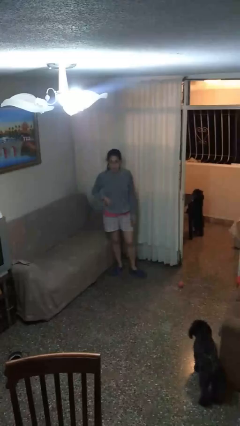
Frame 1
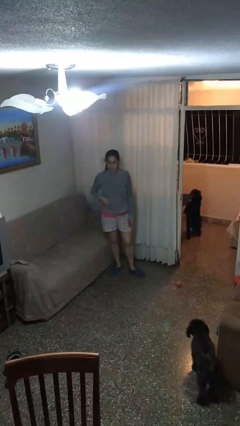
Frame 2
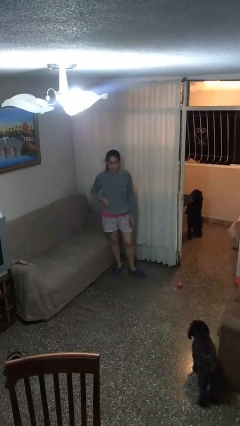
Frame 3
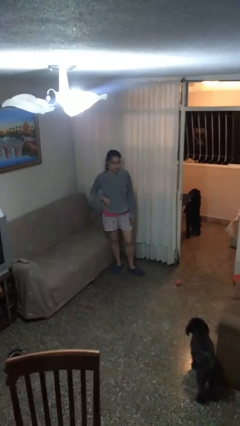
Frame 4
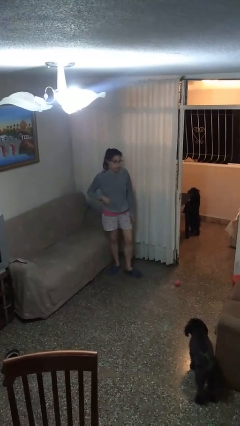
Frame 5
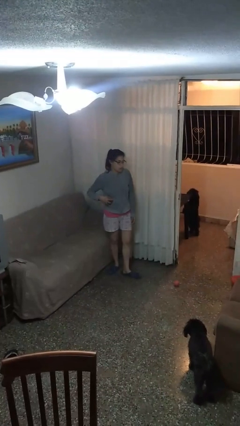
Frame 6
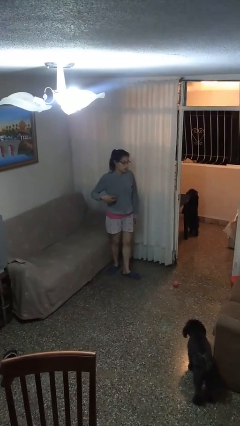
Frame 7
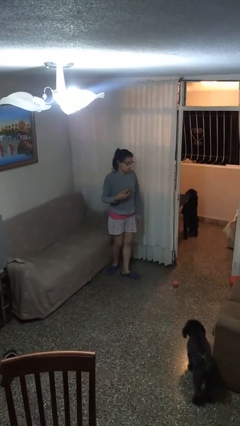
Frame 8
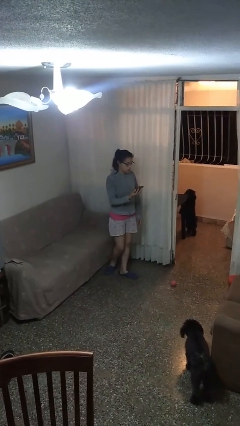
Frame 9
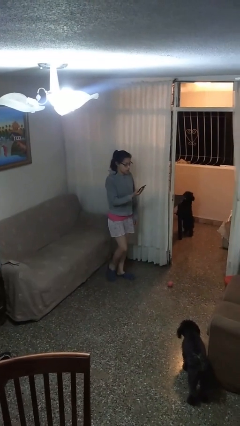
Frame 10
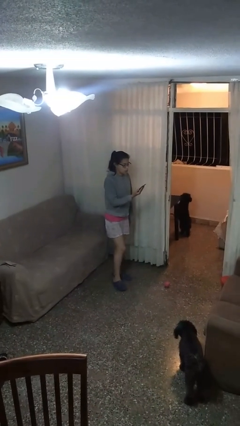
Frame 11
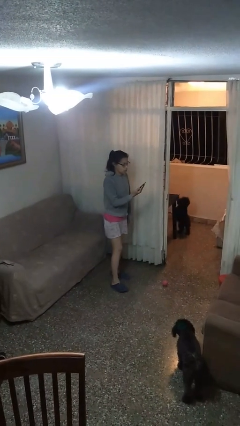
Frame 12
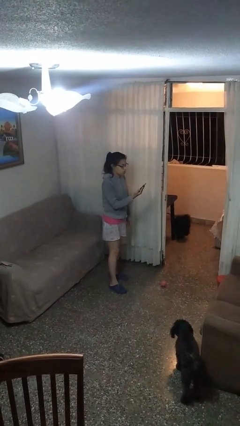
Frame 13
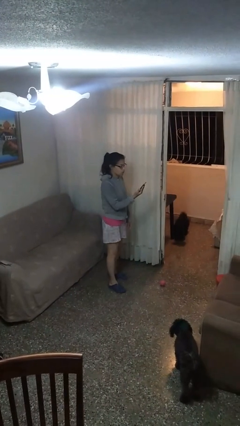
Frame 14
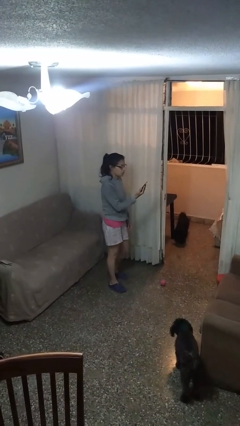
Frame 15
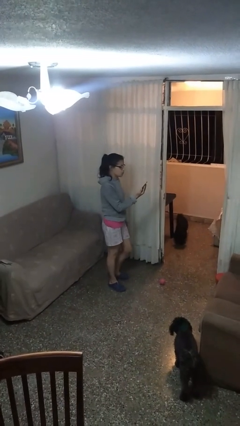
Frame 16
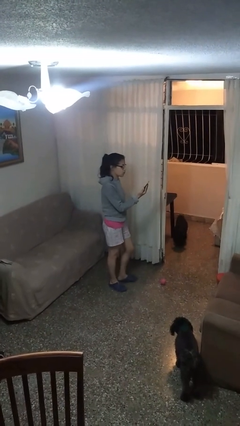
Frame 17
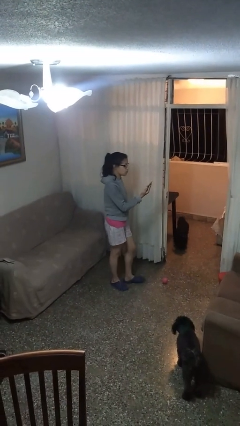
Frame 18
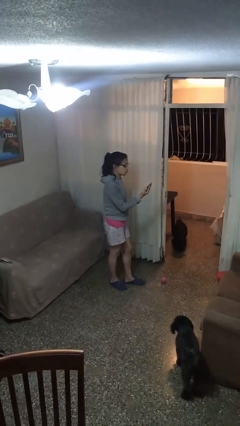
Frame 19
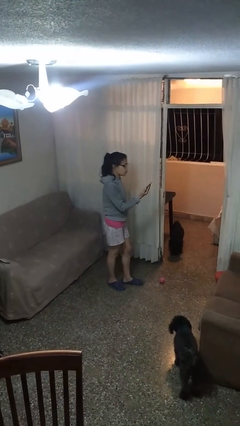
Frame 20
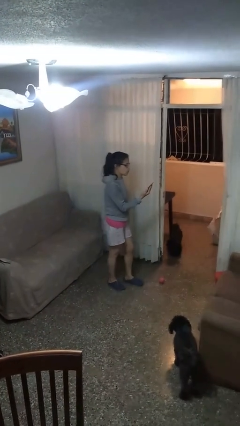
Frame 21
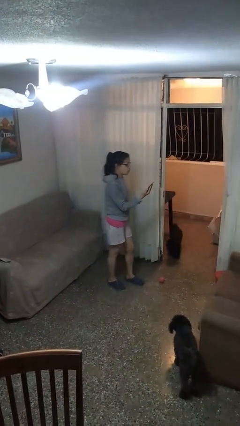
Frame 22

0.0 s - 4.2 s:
person takes phone from pocket

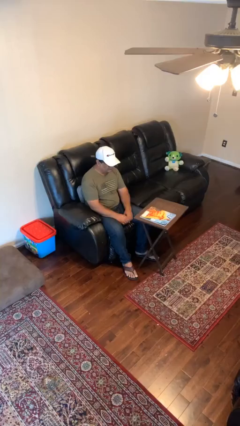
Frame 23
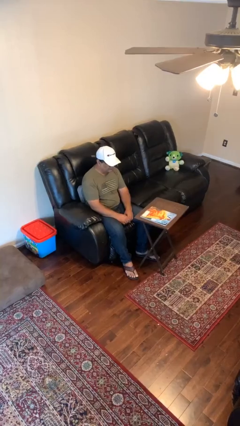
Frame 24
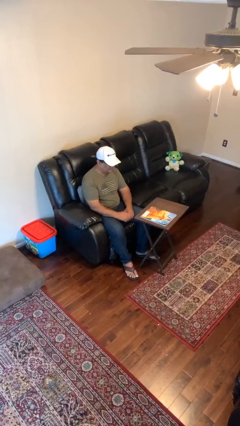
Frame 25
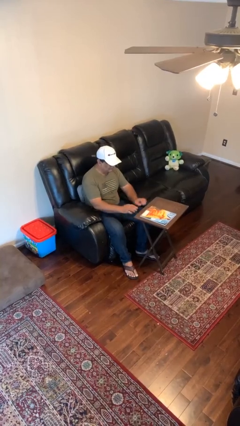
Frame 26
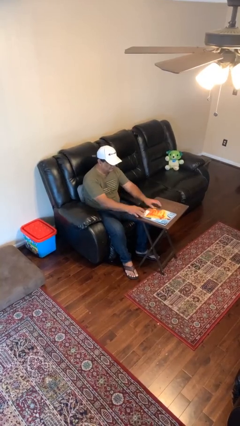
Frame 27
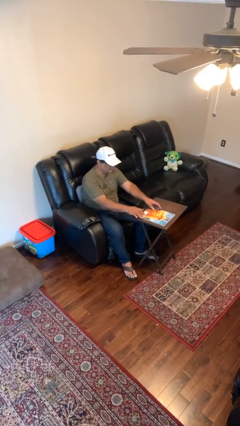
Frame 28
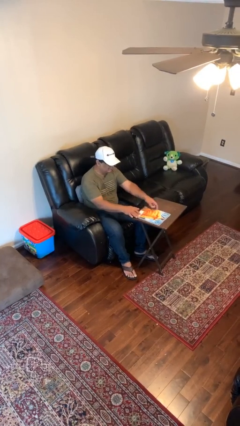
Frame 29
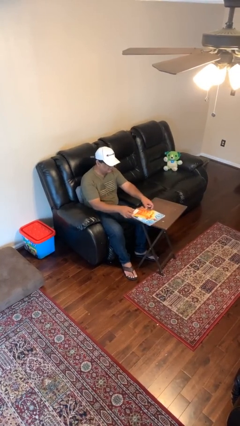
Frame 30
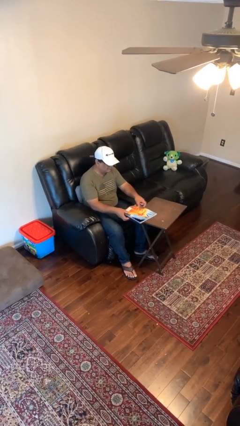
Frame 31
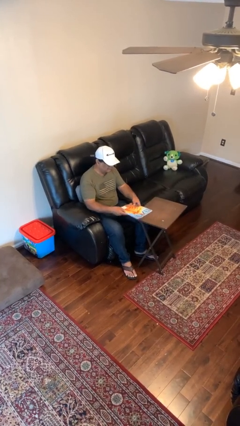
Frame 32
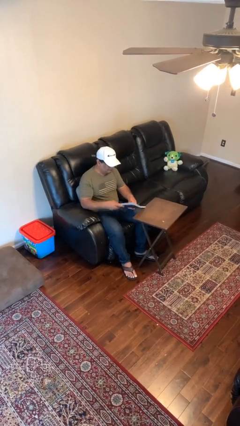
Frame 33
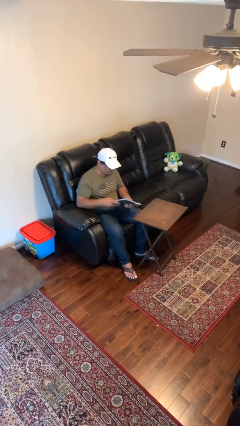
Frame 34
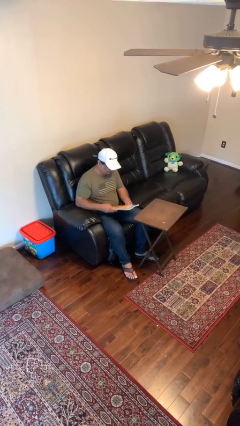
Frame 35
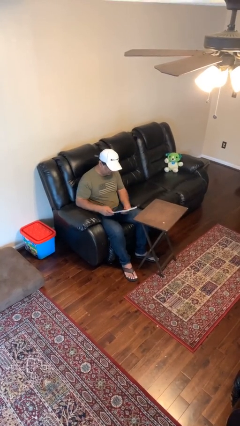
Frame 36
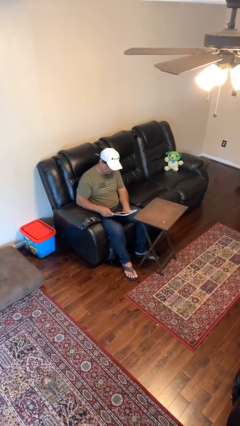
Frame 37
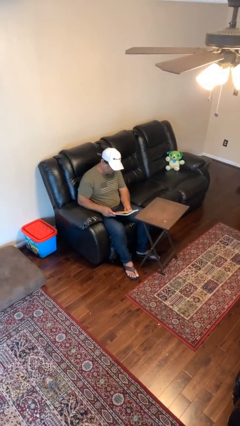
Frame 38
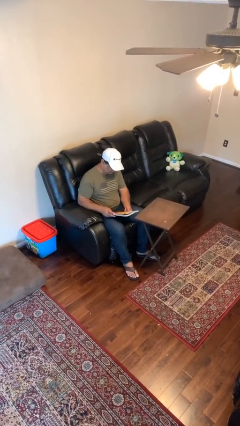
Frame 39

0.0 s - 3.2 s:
person picks up object from table

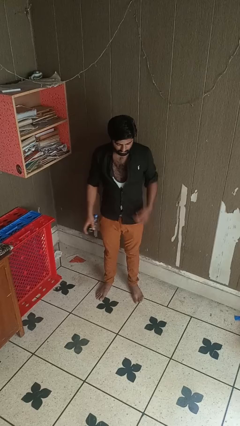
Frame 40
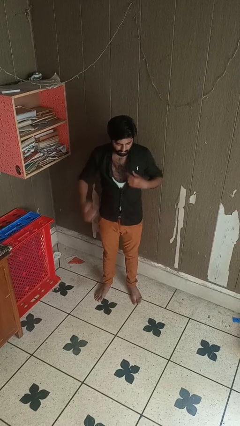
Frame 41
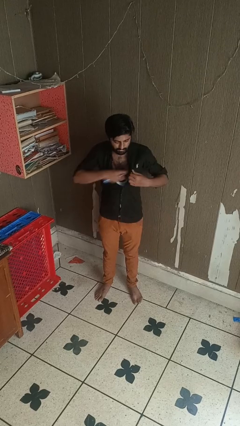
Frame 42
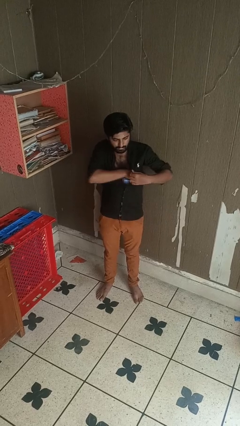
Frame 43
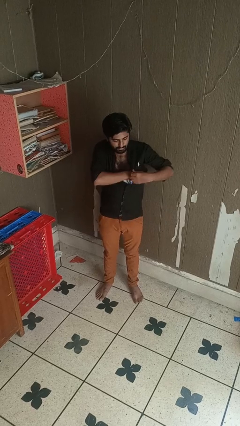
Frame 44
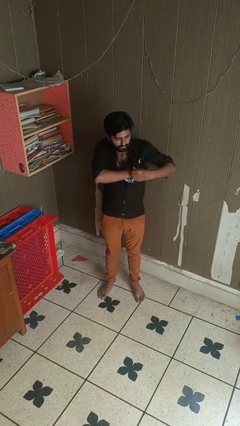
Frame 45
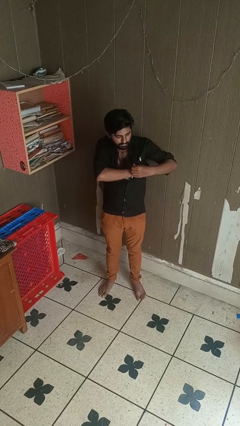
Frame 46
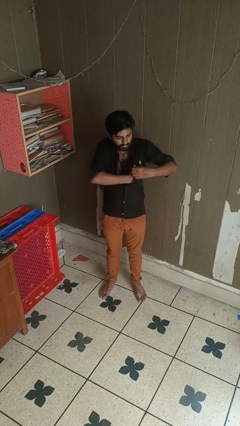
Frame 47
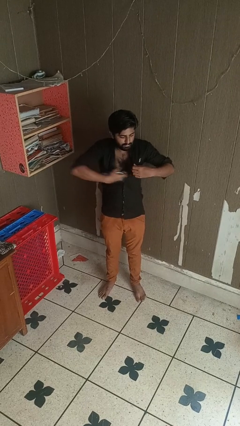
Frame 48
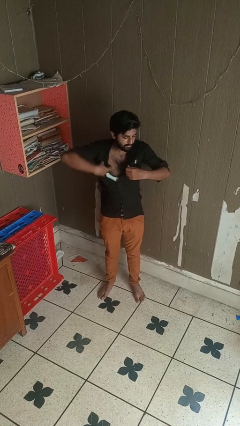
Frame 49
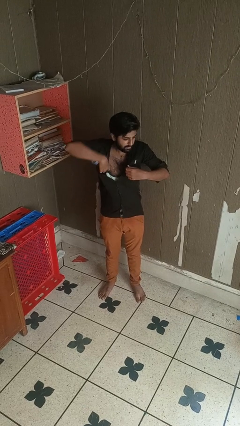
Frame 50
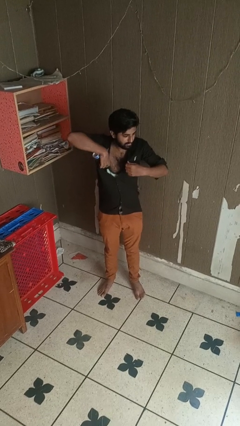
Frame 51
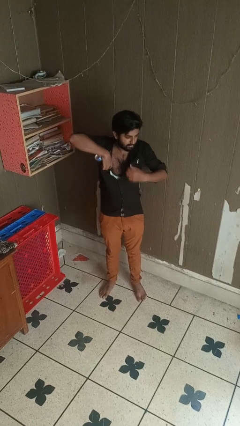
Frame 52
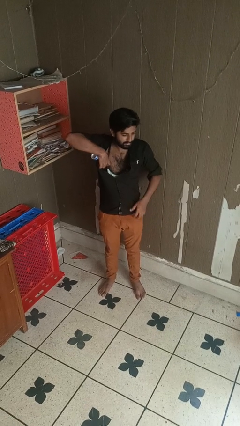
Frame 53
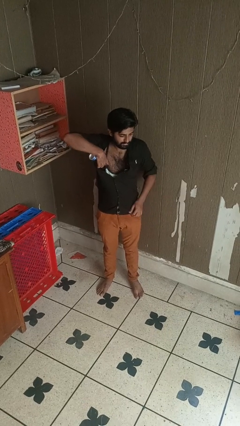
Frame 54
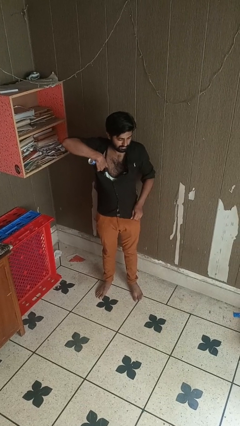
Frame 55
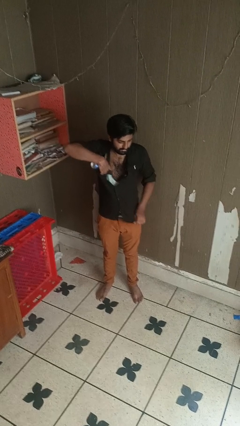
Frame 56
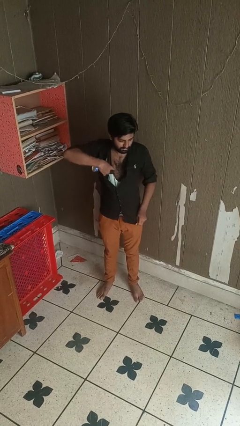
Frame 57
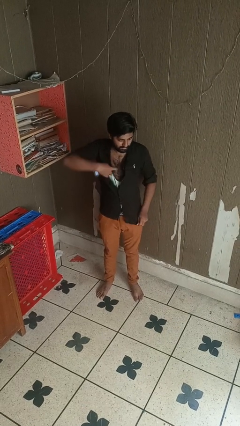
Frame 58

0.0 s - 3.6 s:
person applies deodorant

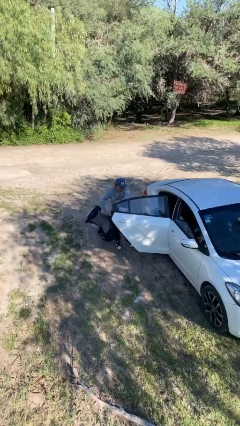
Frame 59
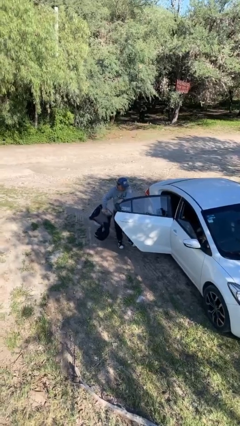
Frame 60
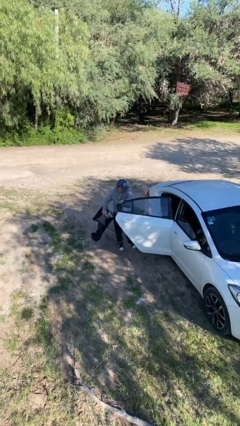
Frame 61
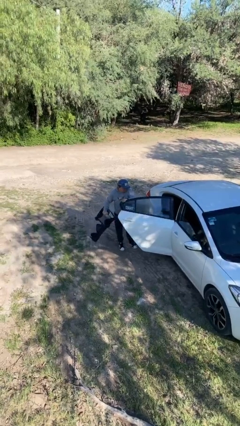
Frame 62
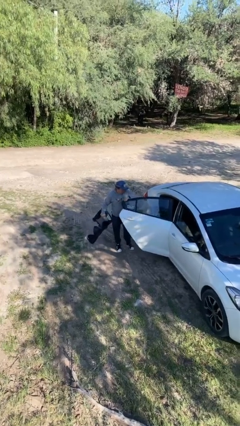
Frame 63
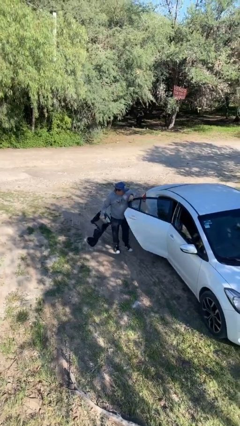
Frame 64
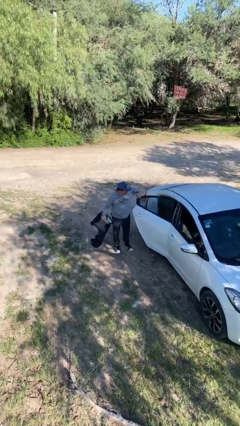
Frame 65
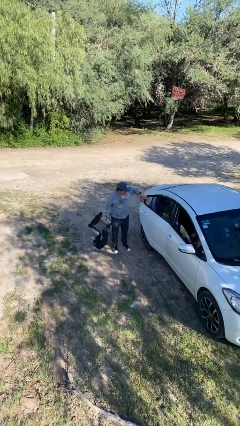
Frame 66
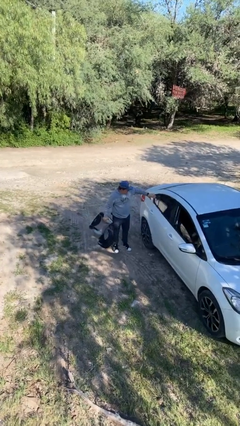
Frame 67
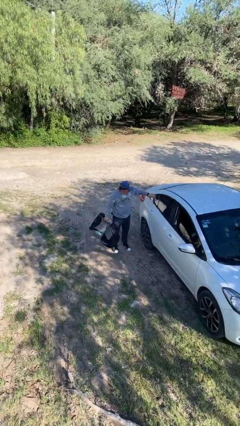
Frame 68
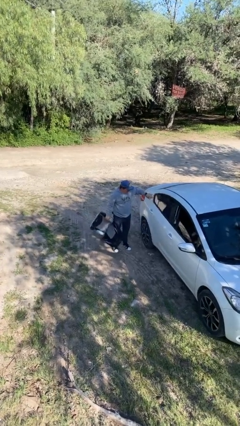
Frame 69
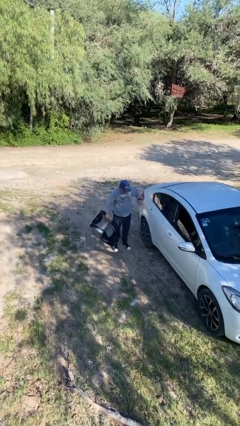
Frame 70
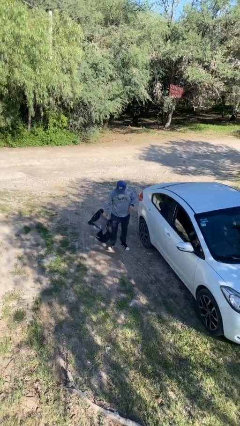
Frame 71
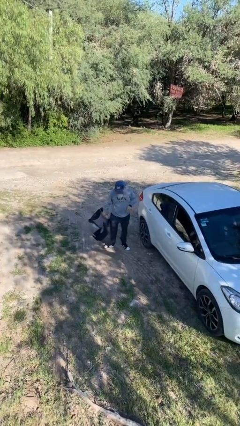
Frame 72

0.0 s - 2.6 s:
person closes car door

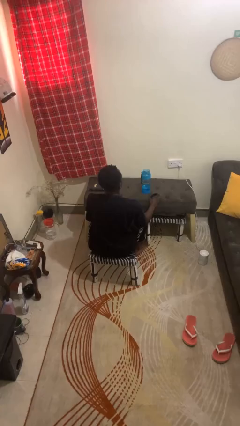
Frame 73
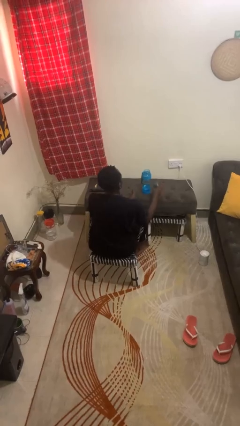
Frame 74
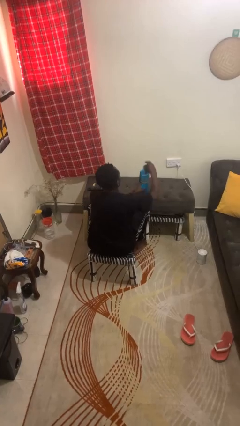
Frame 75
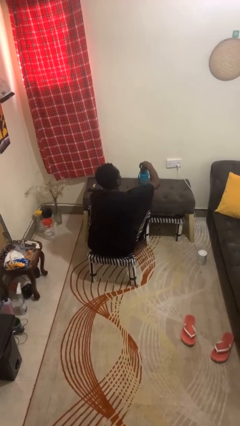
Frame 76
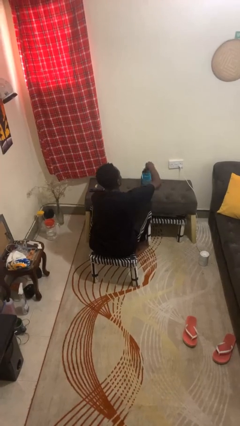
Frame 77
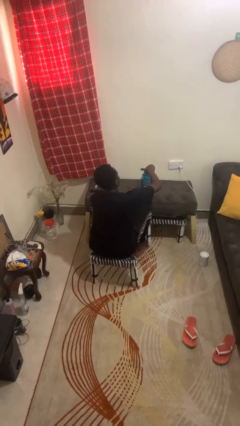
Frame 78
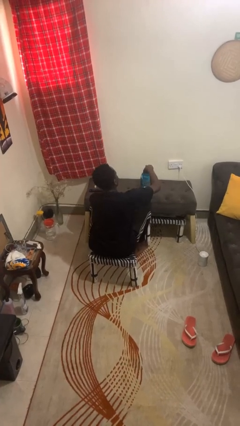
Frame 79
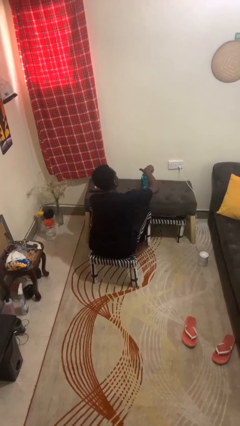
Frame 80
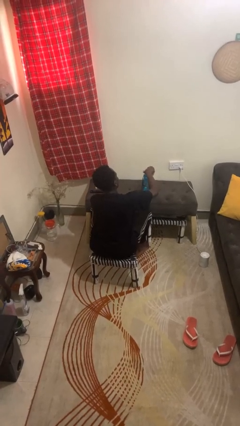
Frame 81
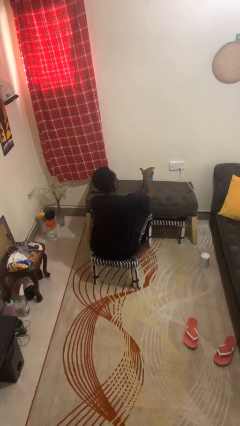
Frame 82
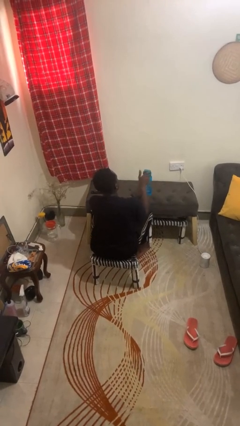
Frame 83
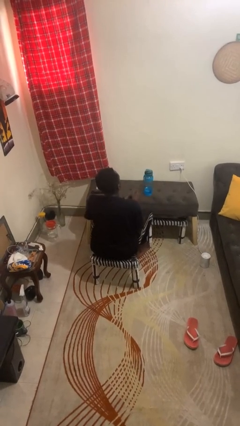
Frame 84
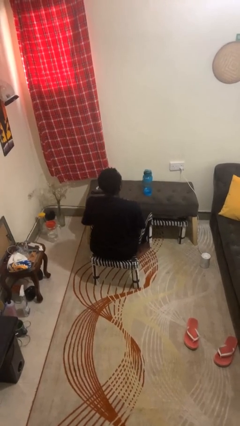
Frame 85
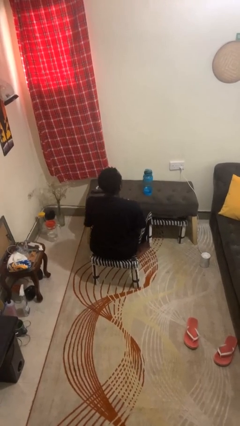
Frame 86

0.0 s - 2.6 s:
person closes jar

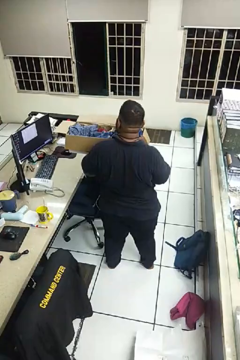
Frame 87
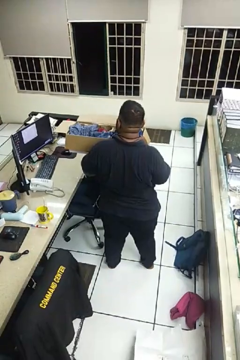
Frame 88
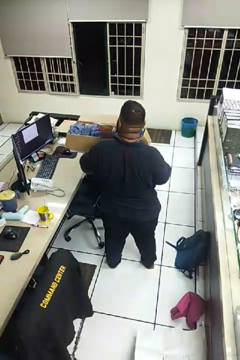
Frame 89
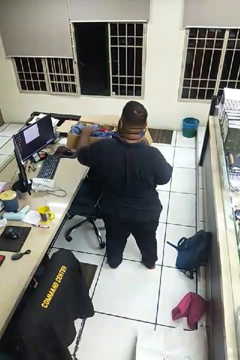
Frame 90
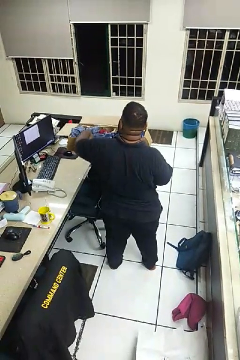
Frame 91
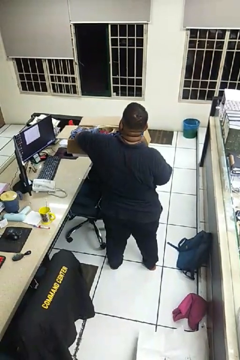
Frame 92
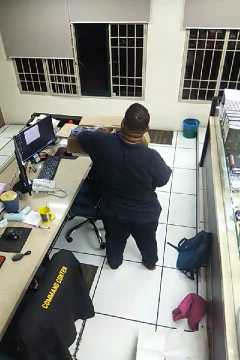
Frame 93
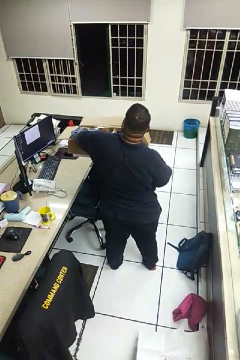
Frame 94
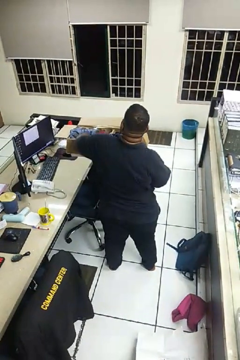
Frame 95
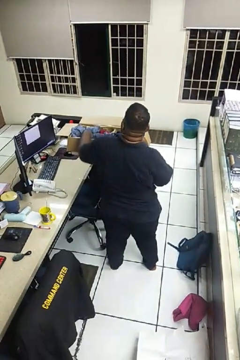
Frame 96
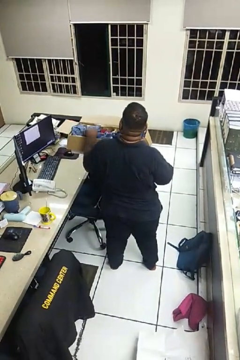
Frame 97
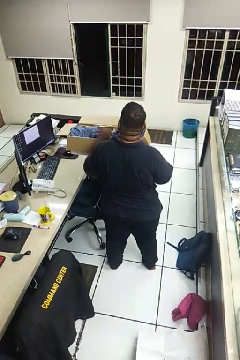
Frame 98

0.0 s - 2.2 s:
person searches in box
